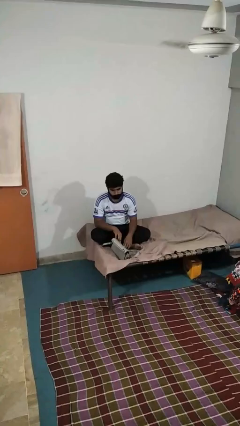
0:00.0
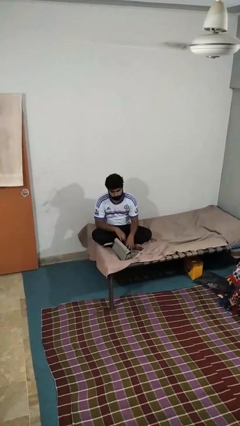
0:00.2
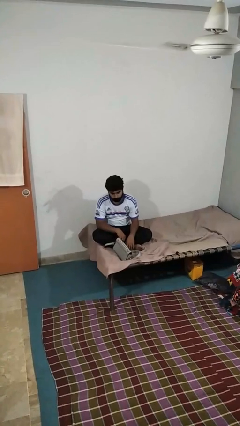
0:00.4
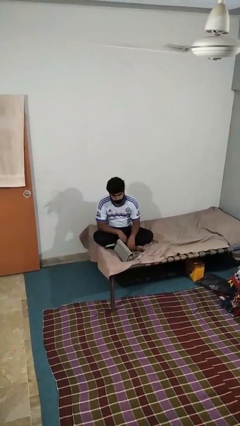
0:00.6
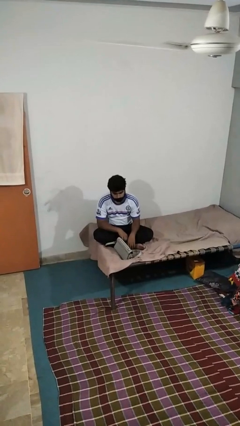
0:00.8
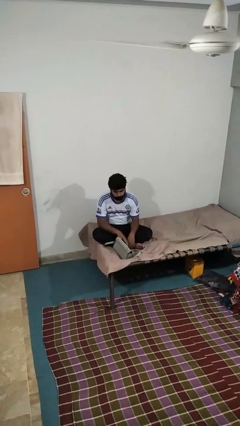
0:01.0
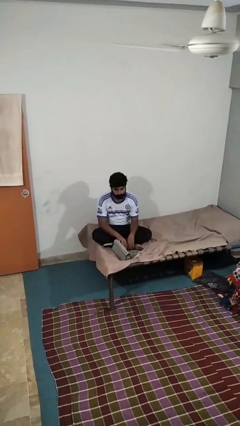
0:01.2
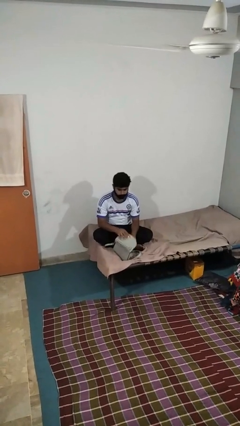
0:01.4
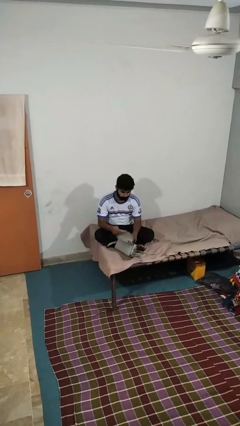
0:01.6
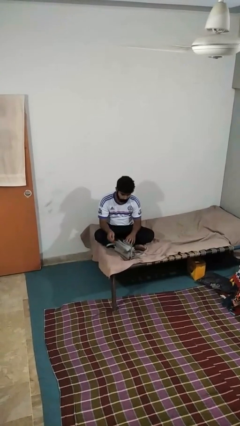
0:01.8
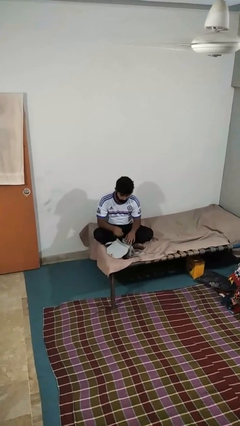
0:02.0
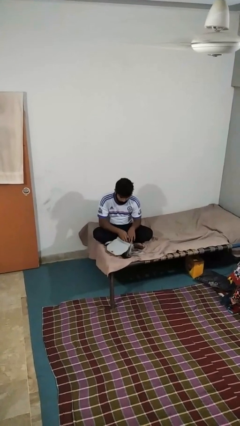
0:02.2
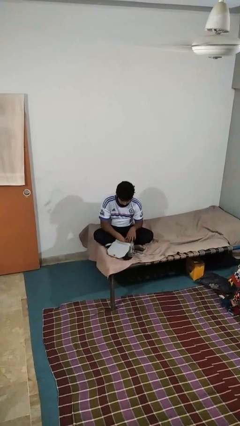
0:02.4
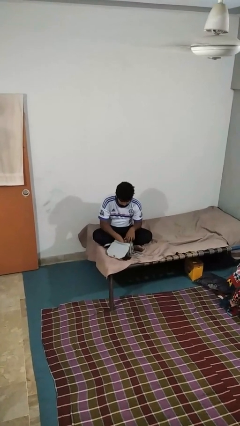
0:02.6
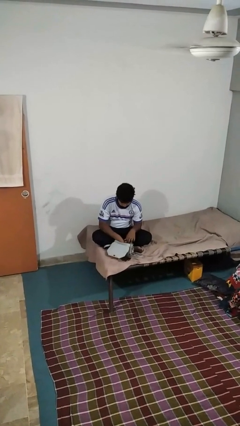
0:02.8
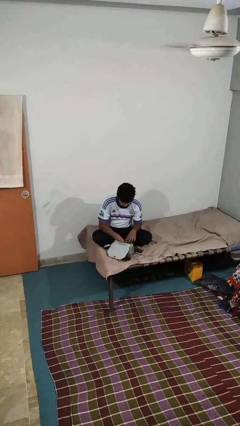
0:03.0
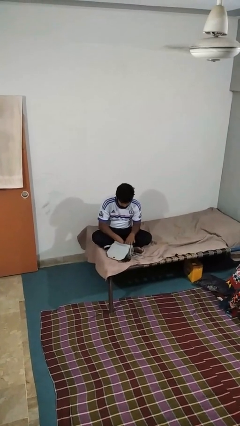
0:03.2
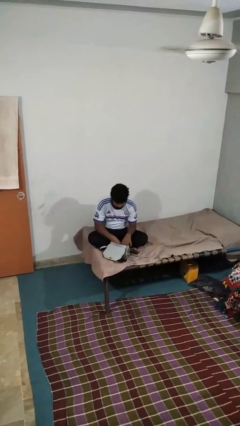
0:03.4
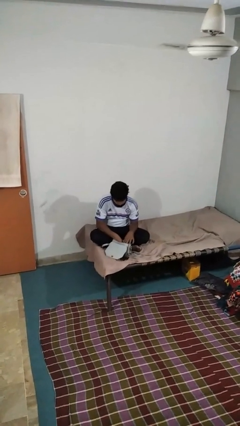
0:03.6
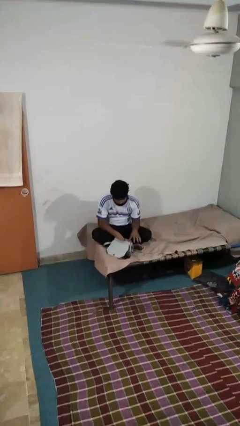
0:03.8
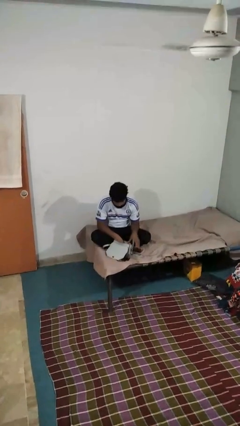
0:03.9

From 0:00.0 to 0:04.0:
person searches in purse

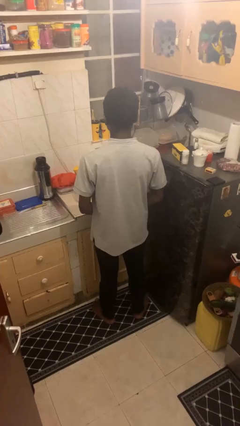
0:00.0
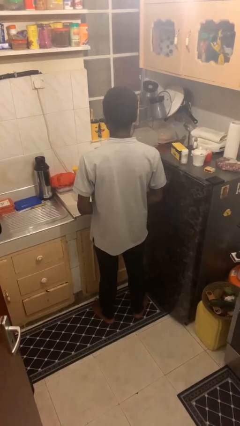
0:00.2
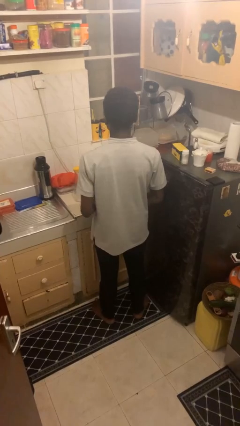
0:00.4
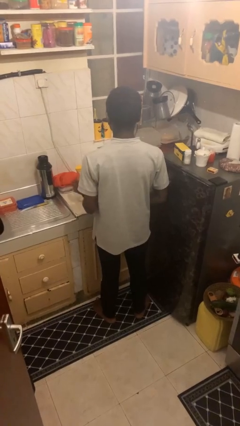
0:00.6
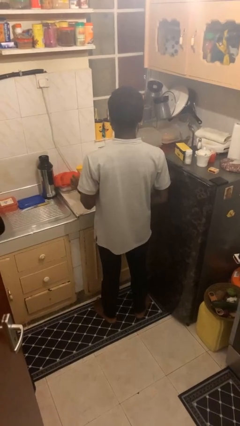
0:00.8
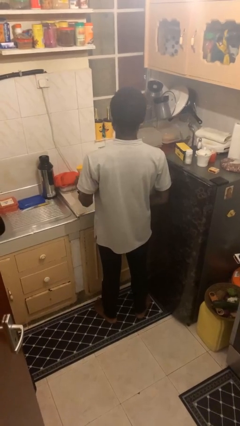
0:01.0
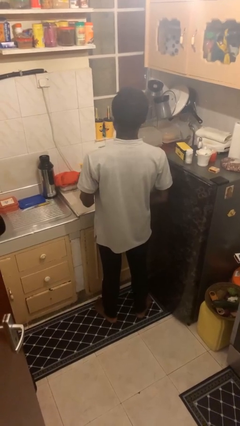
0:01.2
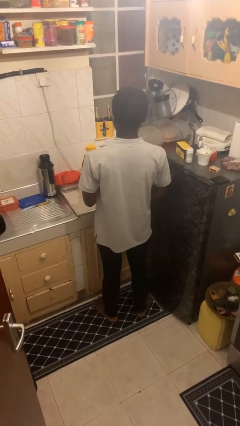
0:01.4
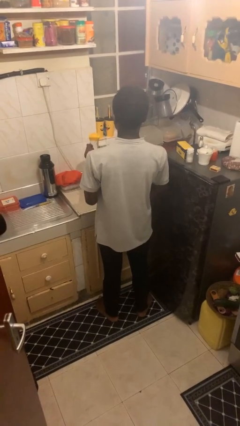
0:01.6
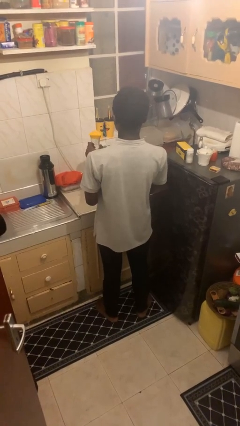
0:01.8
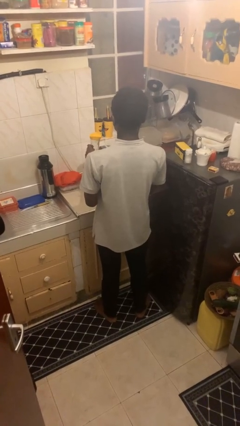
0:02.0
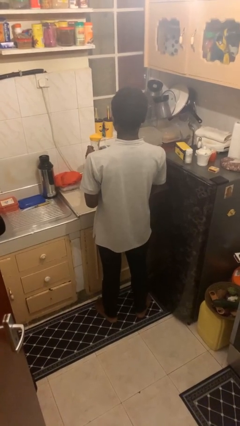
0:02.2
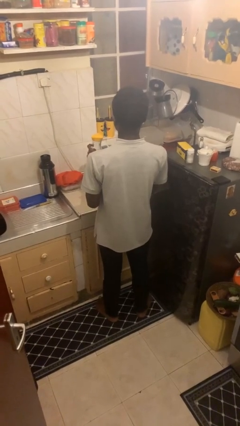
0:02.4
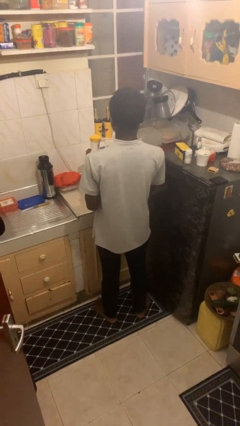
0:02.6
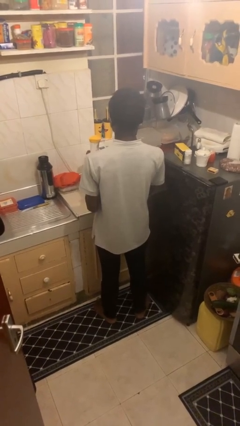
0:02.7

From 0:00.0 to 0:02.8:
person picks up object from countertop

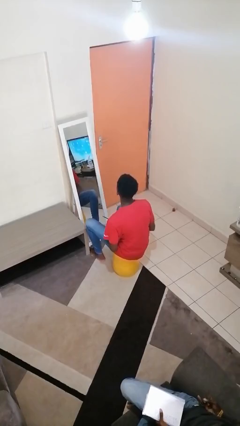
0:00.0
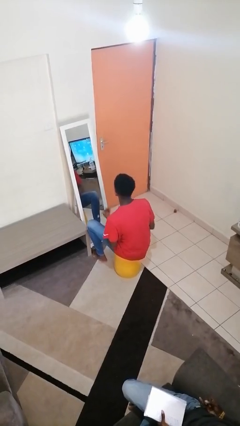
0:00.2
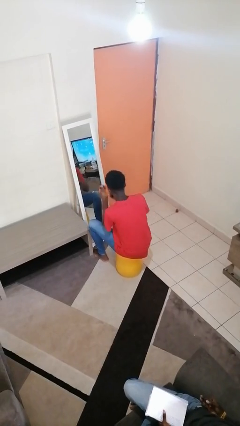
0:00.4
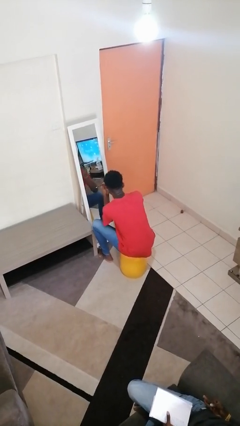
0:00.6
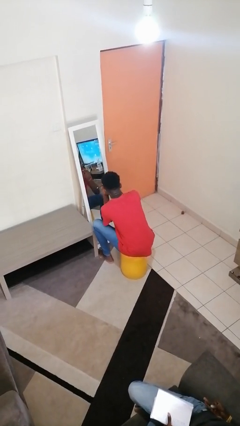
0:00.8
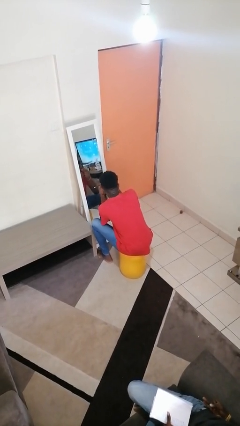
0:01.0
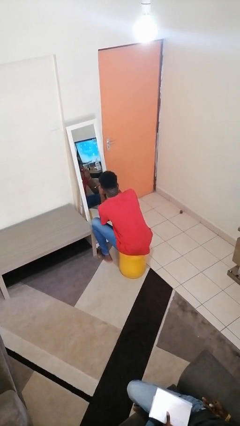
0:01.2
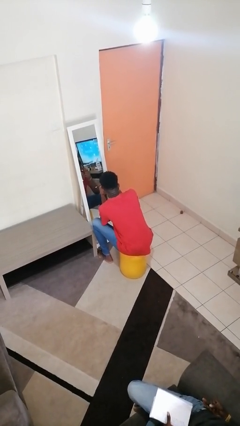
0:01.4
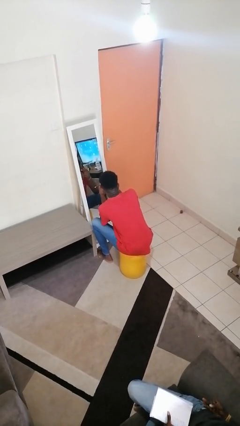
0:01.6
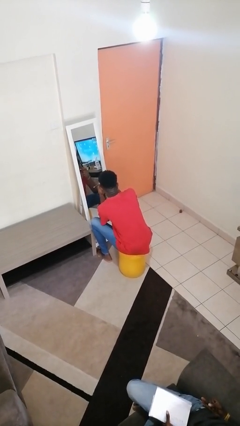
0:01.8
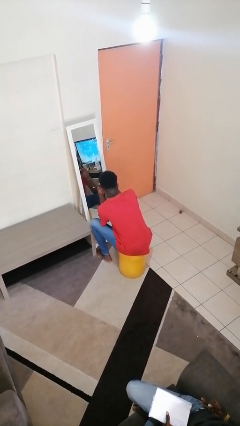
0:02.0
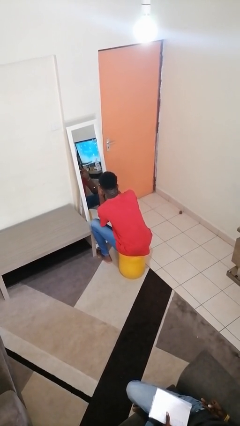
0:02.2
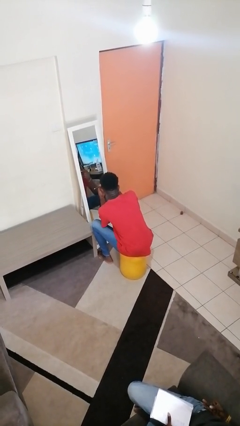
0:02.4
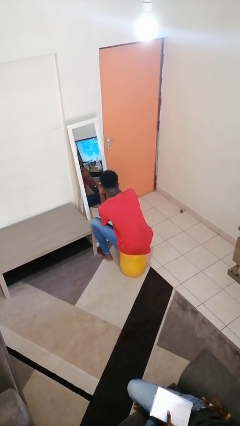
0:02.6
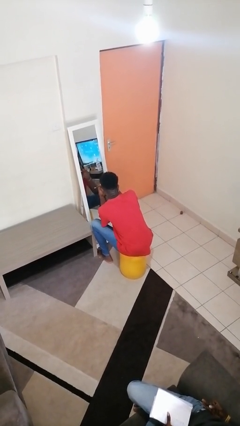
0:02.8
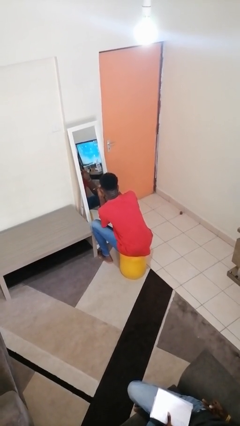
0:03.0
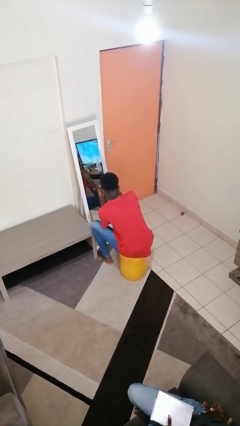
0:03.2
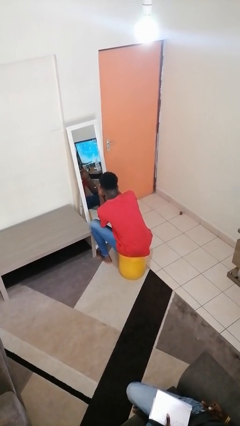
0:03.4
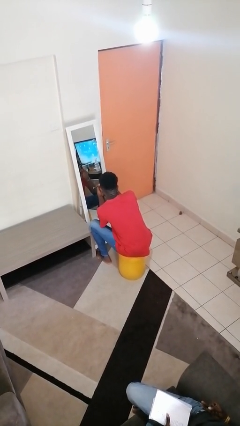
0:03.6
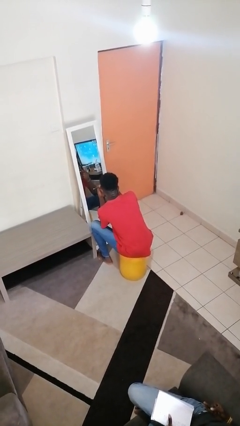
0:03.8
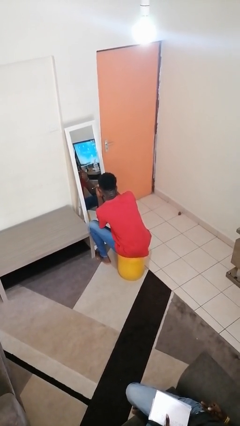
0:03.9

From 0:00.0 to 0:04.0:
person applies eye makeup

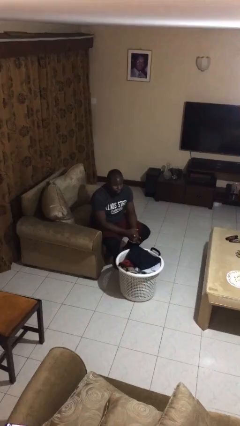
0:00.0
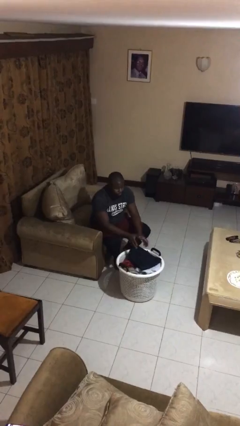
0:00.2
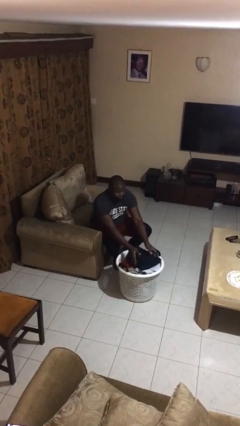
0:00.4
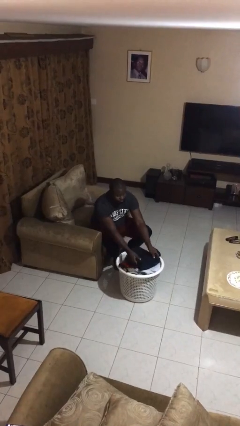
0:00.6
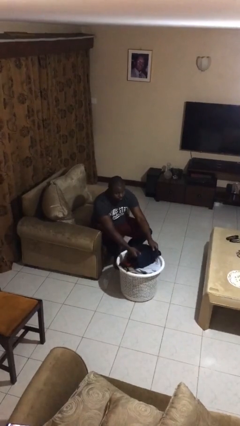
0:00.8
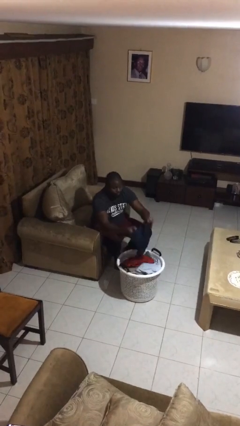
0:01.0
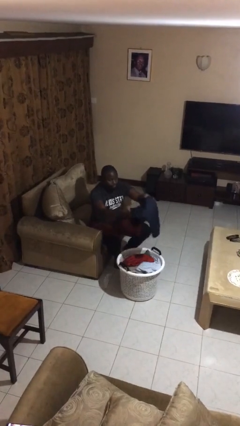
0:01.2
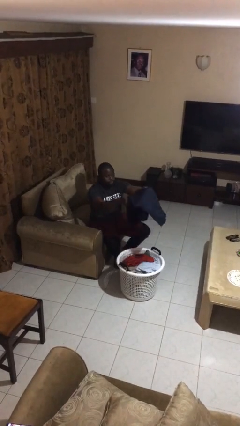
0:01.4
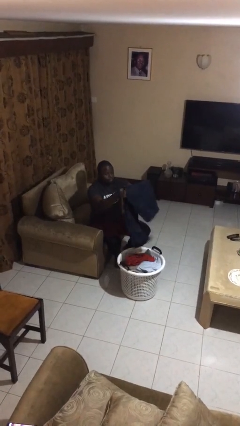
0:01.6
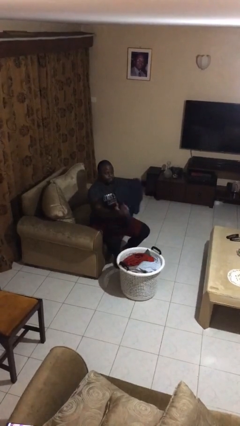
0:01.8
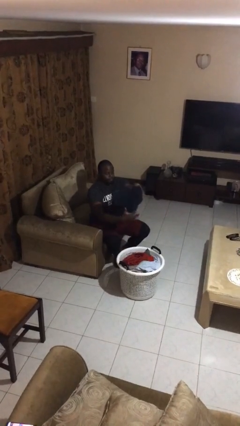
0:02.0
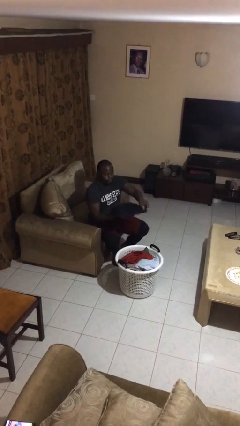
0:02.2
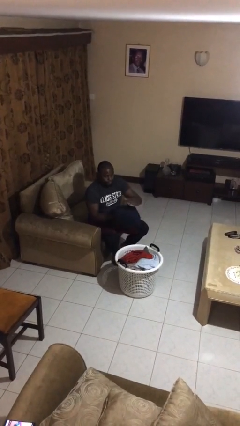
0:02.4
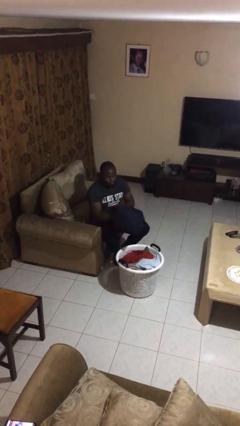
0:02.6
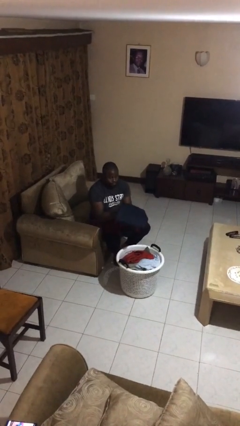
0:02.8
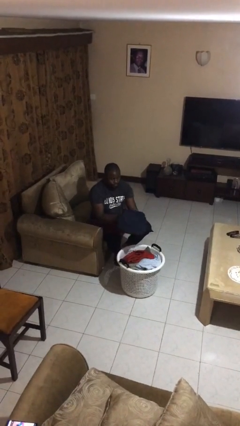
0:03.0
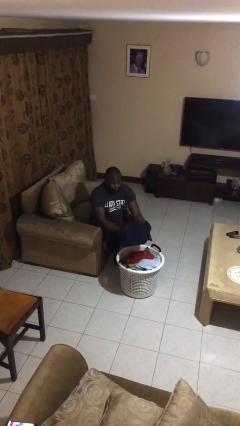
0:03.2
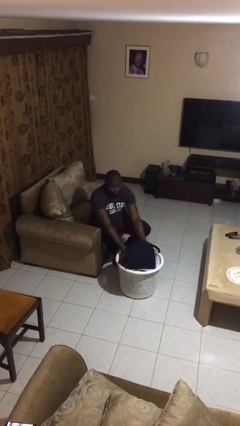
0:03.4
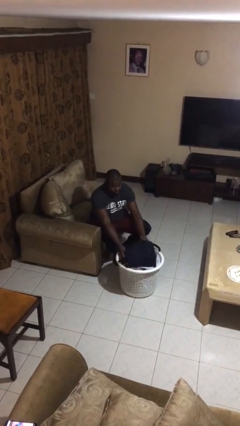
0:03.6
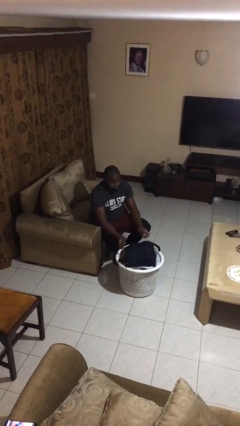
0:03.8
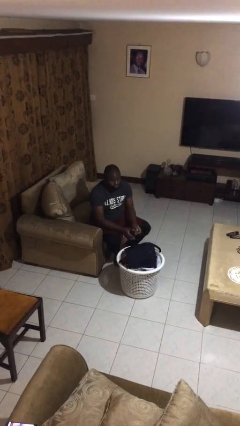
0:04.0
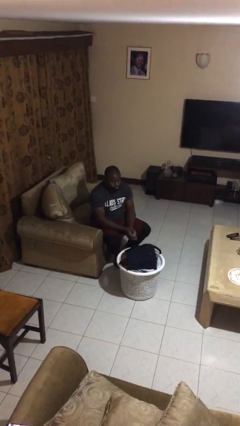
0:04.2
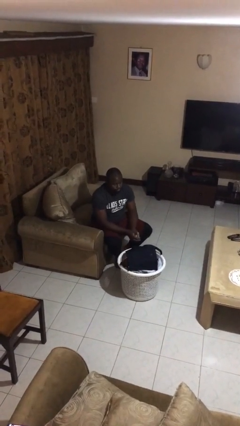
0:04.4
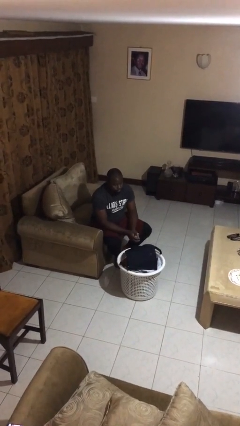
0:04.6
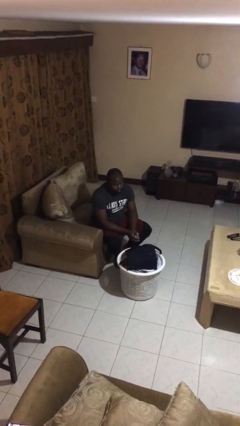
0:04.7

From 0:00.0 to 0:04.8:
person folds pants

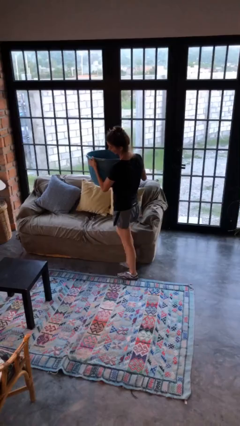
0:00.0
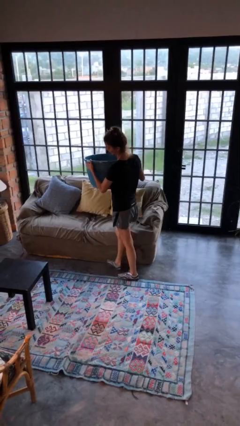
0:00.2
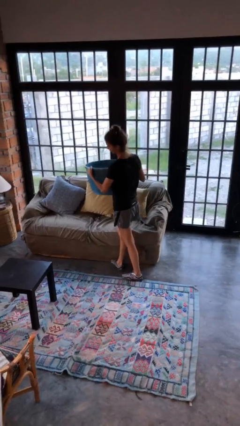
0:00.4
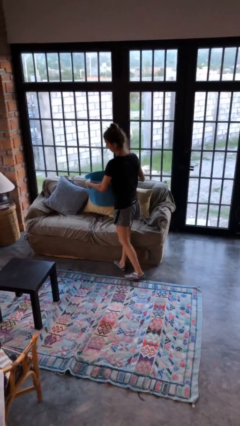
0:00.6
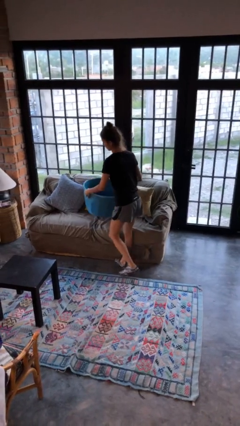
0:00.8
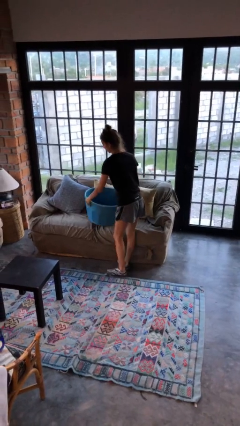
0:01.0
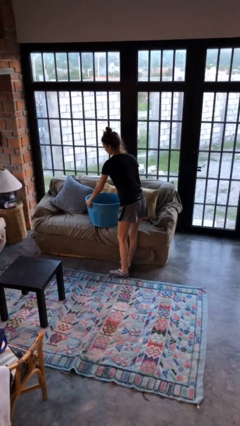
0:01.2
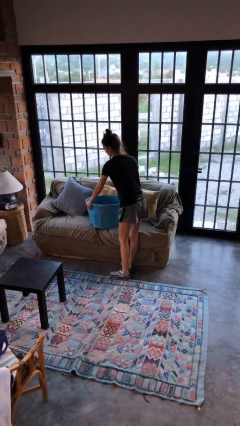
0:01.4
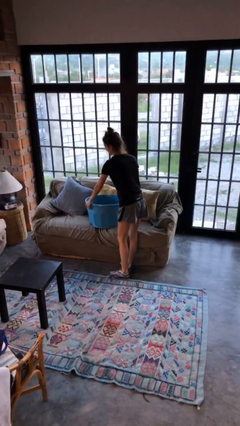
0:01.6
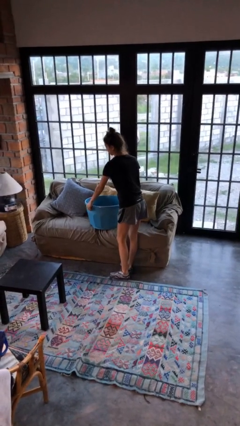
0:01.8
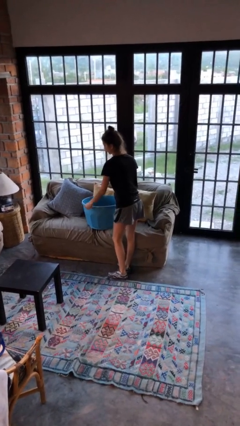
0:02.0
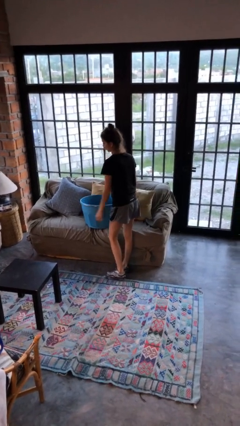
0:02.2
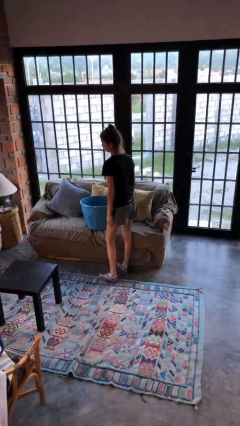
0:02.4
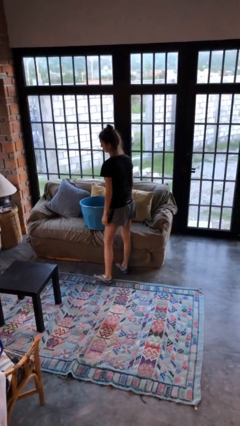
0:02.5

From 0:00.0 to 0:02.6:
person puts down object on couch
